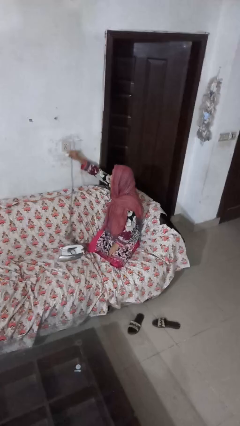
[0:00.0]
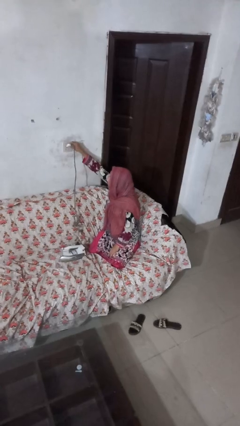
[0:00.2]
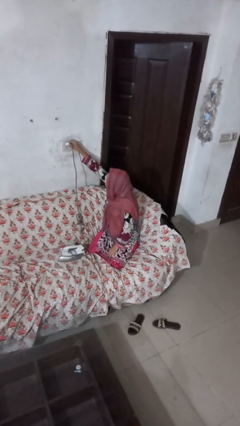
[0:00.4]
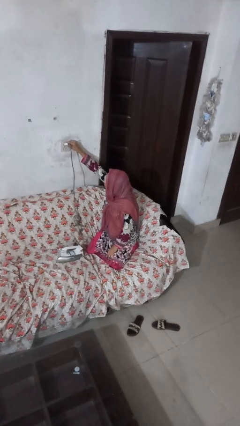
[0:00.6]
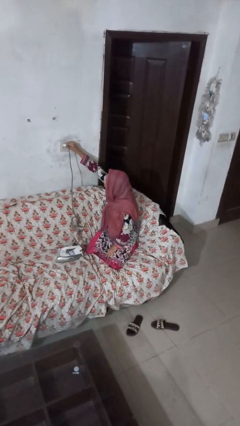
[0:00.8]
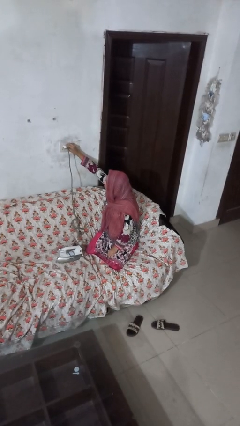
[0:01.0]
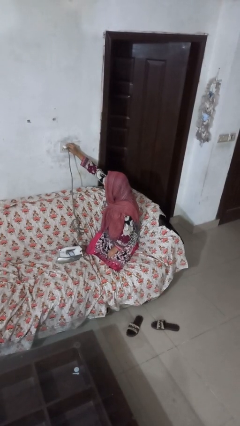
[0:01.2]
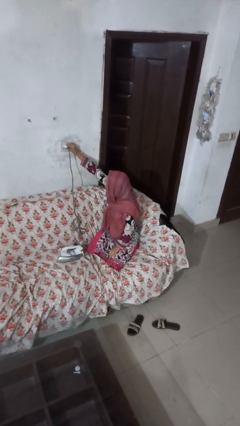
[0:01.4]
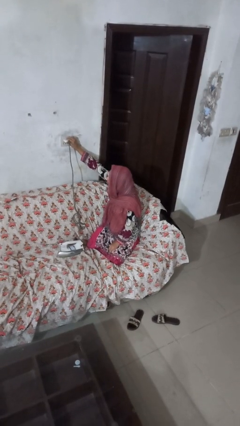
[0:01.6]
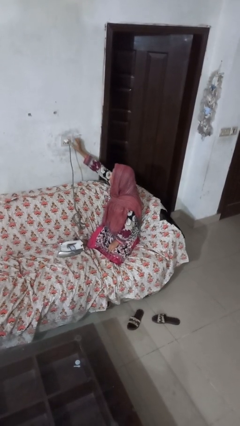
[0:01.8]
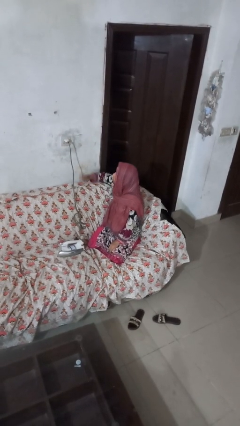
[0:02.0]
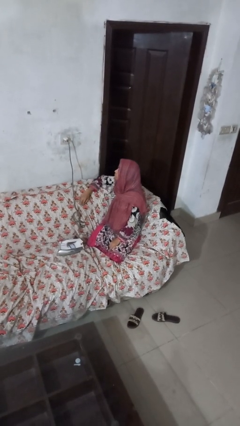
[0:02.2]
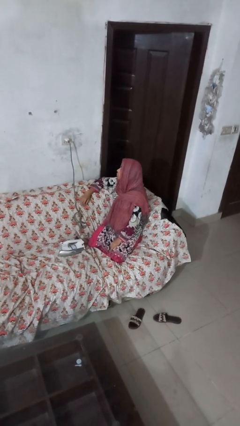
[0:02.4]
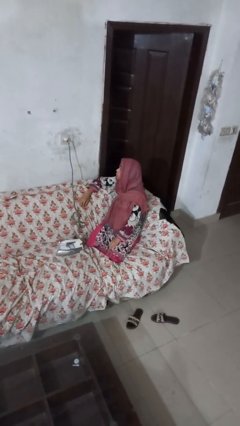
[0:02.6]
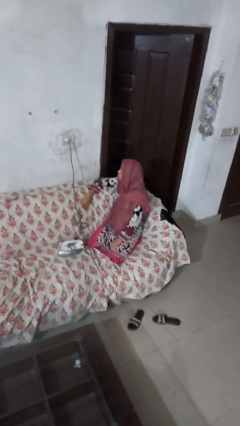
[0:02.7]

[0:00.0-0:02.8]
person plugs into electrical socket

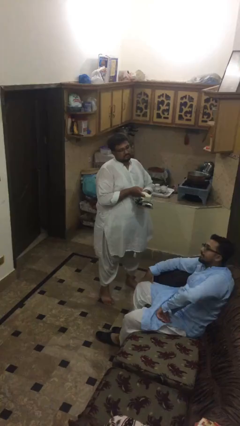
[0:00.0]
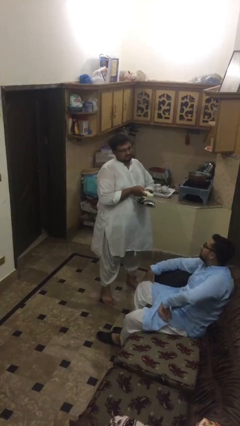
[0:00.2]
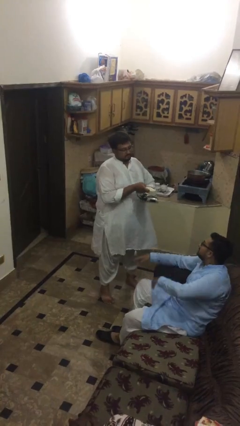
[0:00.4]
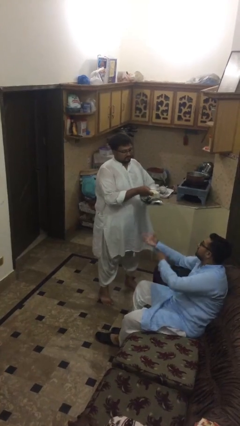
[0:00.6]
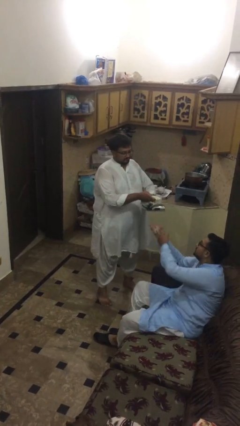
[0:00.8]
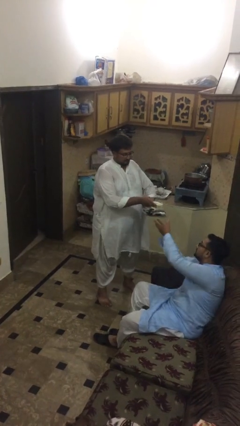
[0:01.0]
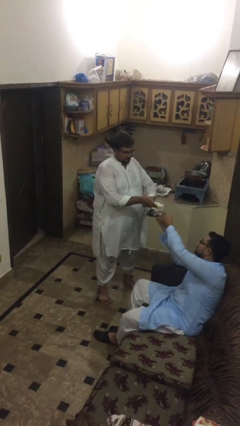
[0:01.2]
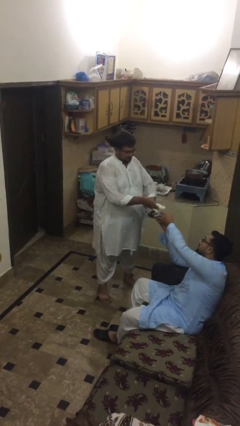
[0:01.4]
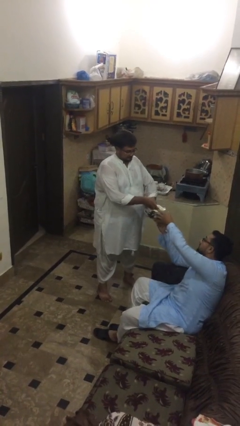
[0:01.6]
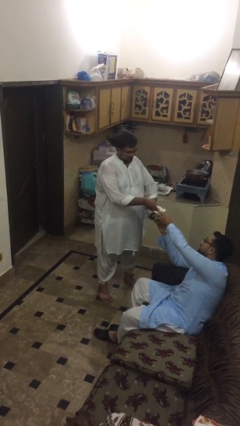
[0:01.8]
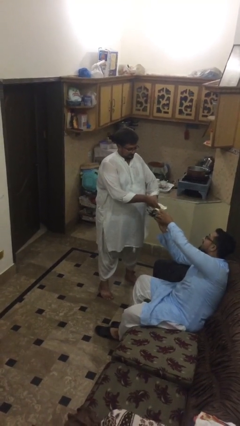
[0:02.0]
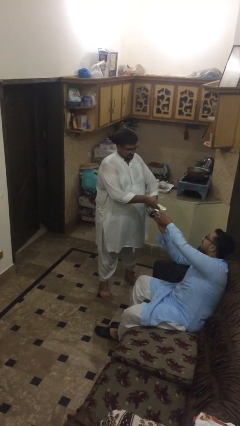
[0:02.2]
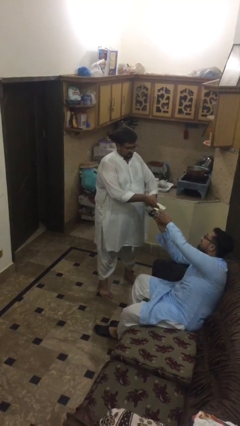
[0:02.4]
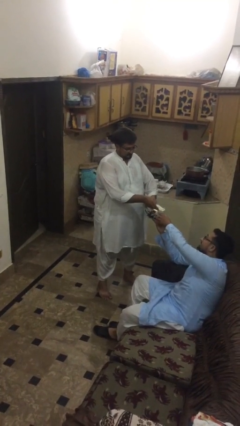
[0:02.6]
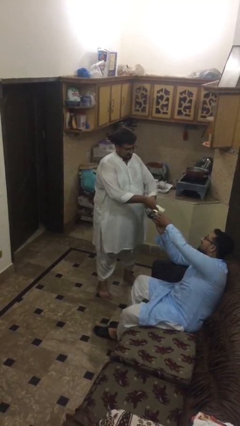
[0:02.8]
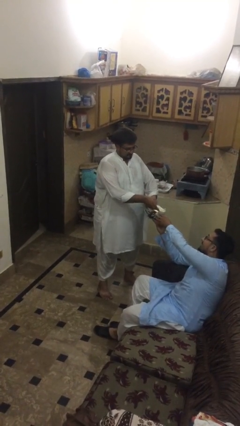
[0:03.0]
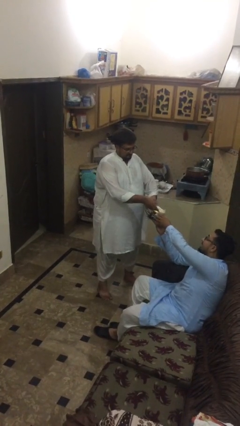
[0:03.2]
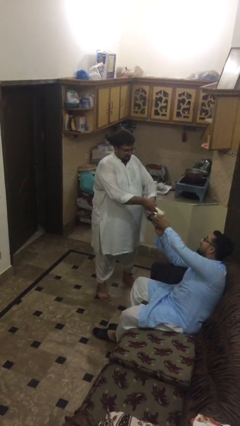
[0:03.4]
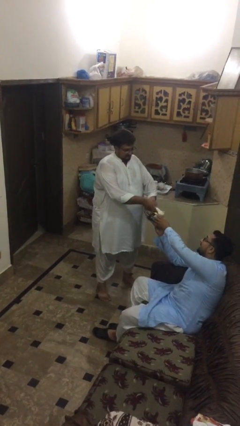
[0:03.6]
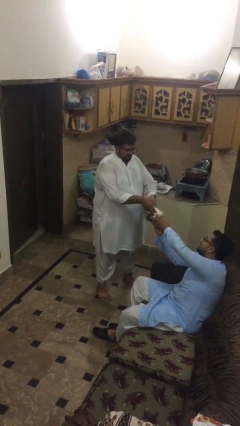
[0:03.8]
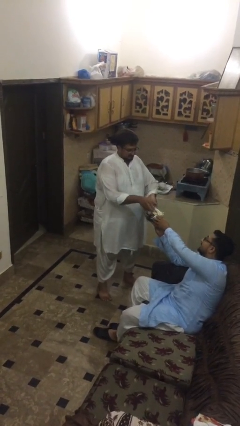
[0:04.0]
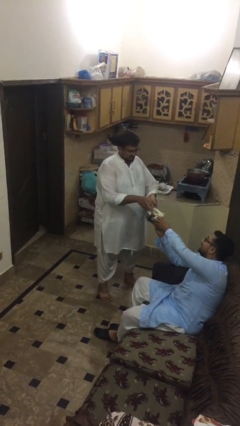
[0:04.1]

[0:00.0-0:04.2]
person transfers object to person

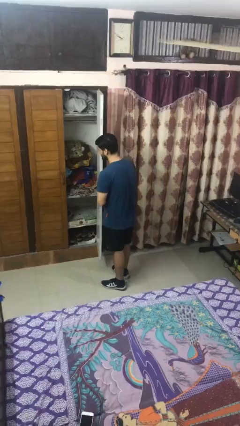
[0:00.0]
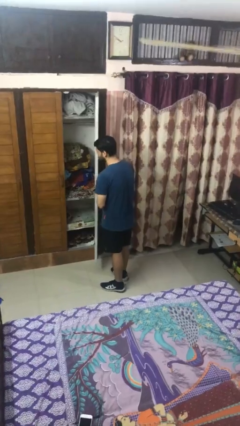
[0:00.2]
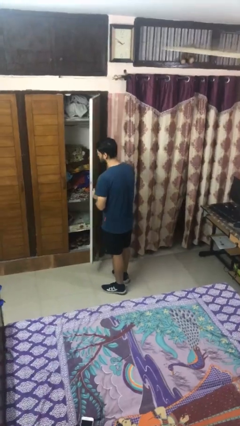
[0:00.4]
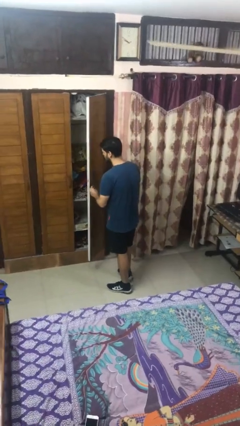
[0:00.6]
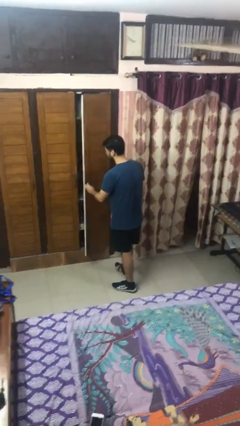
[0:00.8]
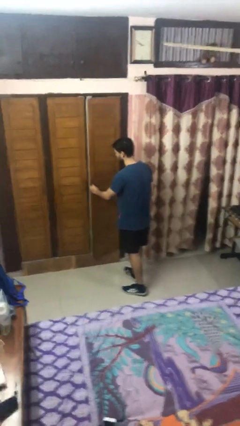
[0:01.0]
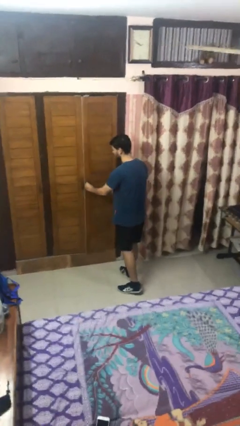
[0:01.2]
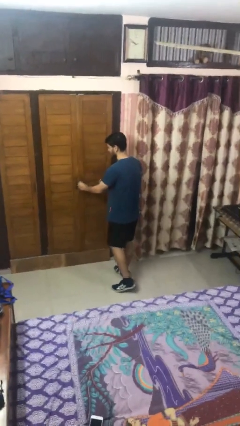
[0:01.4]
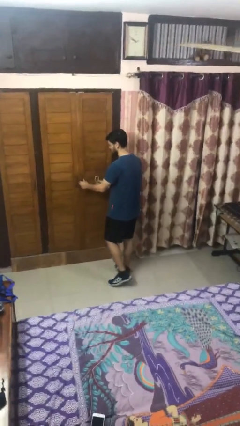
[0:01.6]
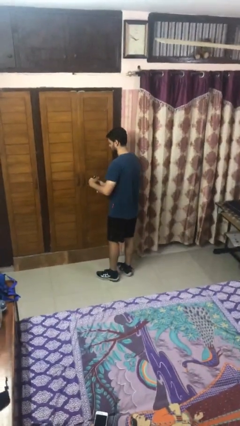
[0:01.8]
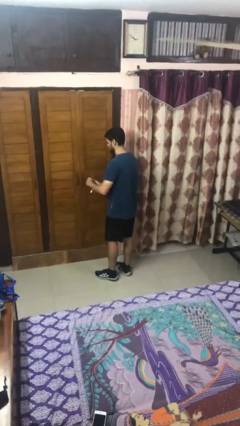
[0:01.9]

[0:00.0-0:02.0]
person closes facility door

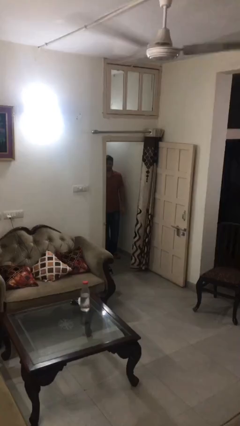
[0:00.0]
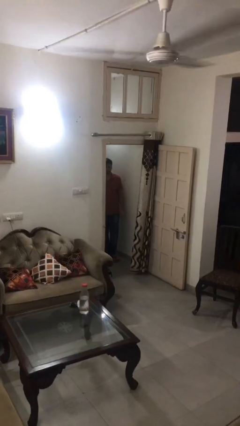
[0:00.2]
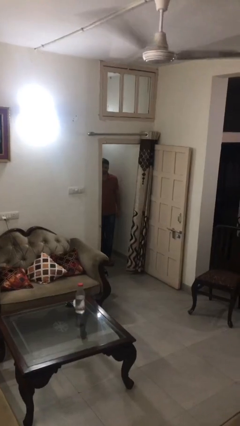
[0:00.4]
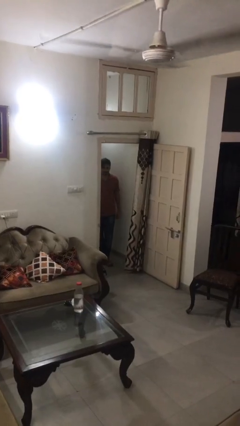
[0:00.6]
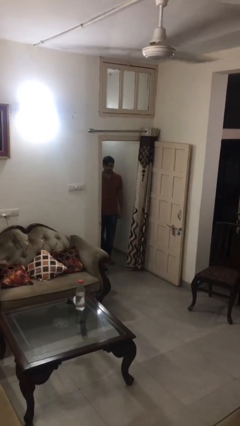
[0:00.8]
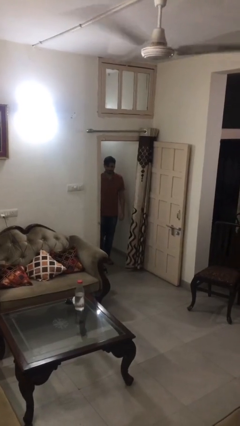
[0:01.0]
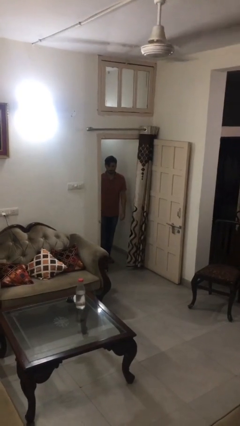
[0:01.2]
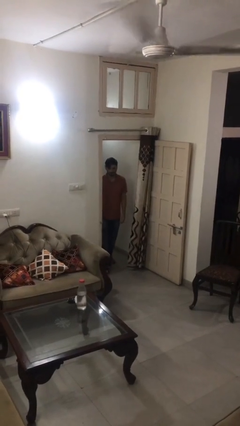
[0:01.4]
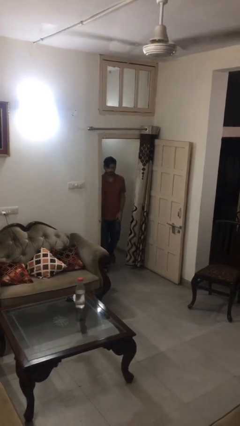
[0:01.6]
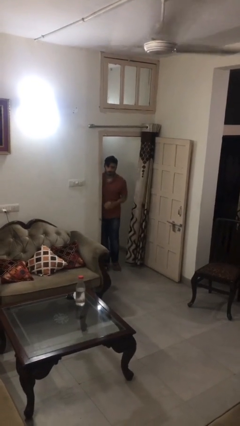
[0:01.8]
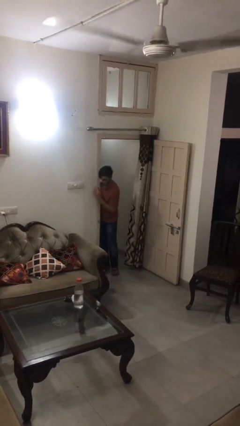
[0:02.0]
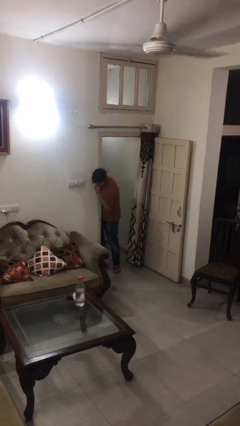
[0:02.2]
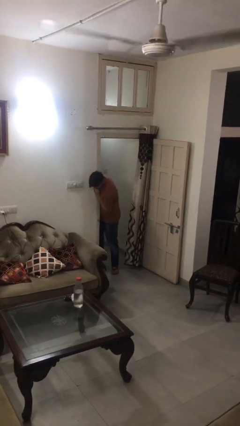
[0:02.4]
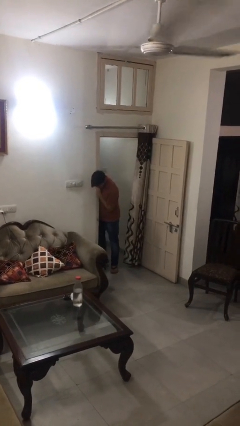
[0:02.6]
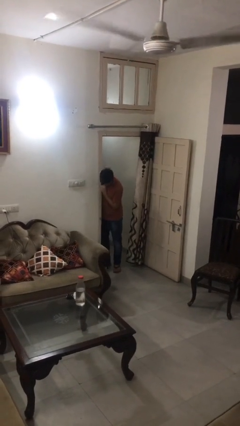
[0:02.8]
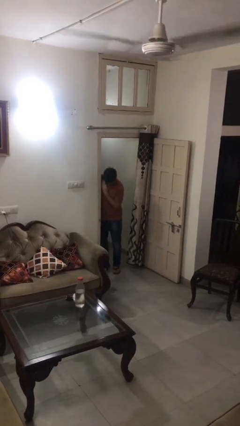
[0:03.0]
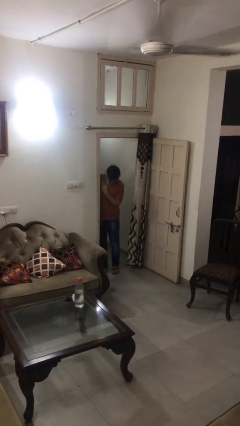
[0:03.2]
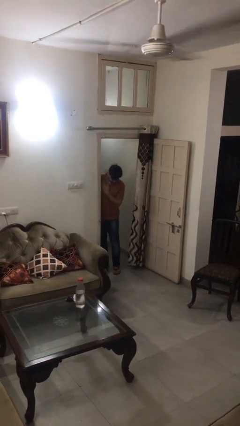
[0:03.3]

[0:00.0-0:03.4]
person bumps into wall

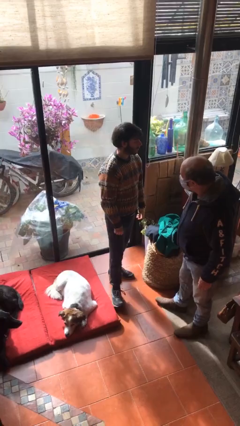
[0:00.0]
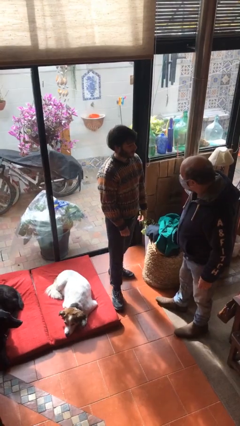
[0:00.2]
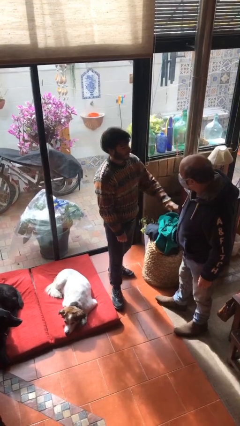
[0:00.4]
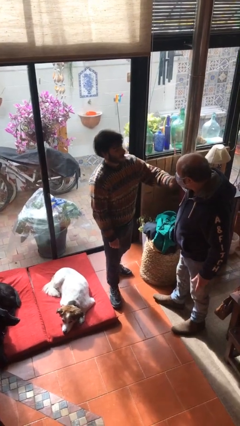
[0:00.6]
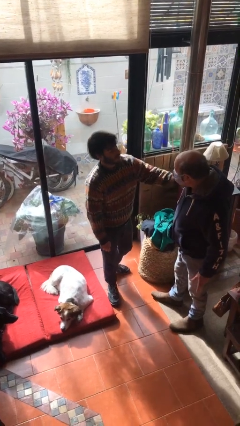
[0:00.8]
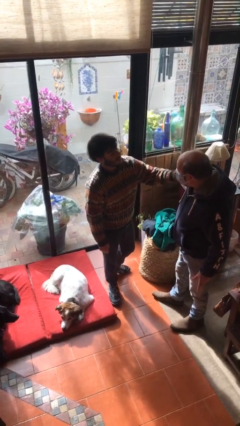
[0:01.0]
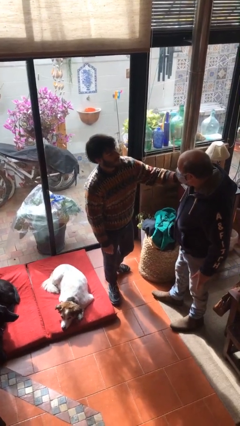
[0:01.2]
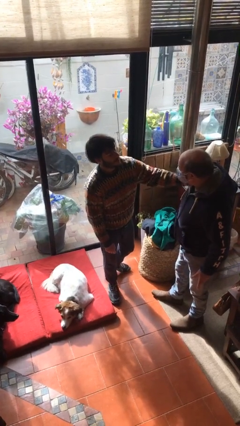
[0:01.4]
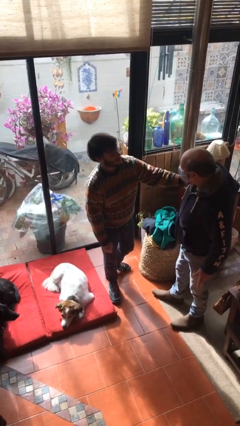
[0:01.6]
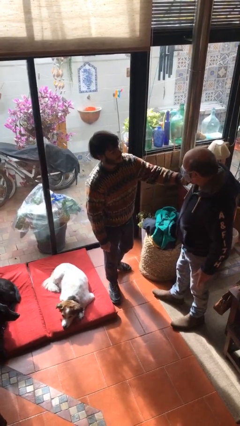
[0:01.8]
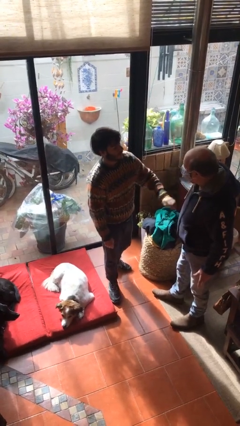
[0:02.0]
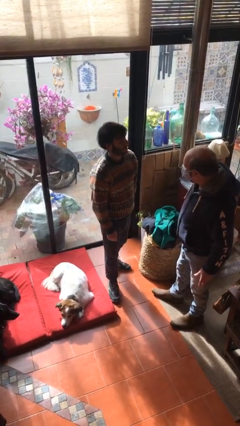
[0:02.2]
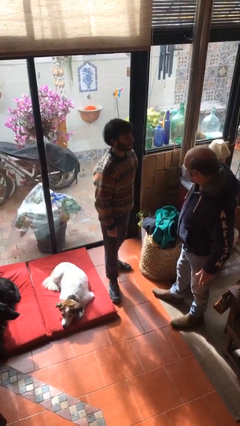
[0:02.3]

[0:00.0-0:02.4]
person pounds shoulders of person

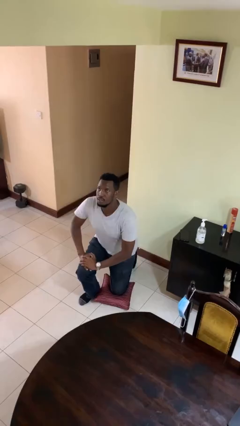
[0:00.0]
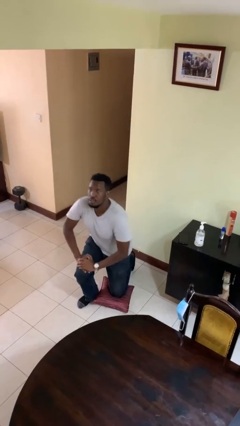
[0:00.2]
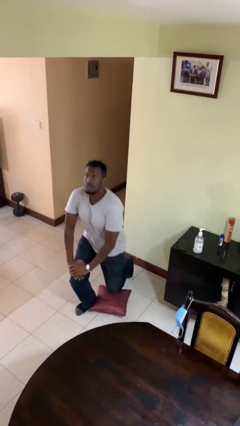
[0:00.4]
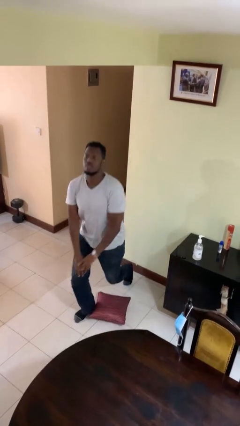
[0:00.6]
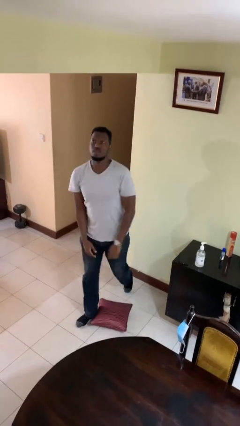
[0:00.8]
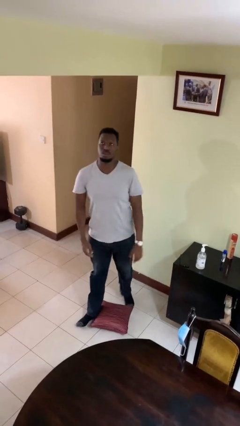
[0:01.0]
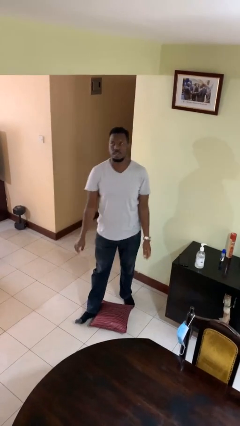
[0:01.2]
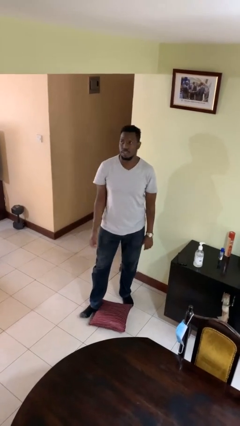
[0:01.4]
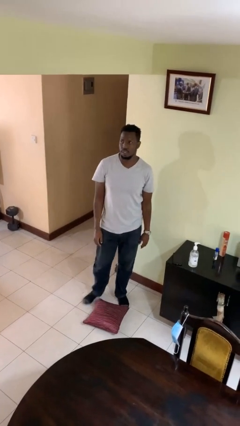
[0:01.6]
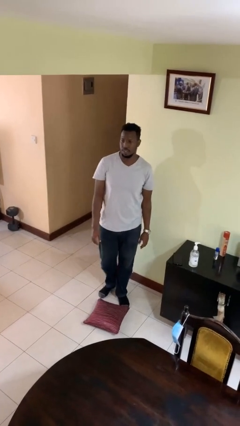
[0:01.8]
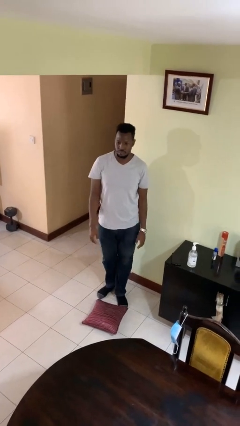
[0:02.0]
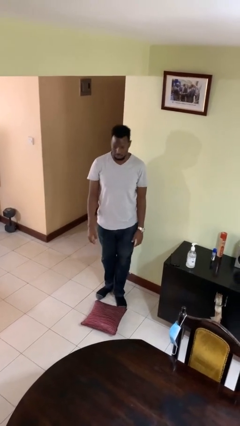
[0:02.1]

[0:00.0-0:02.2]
person stands up from floor

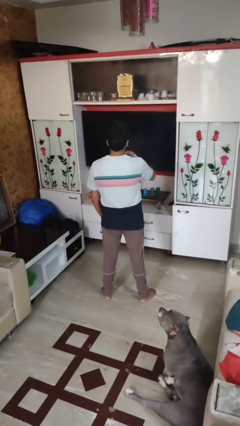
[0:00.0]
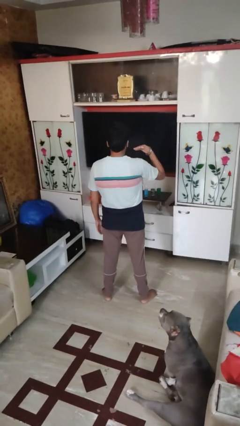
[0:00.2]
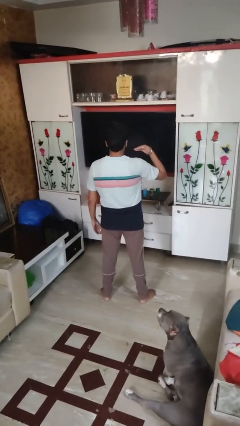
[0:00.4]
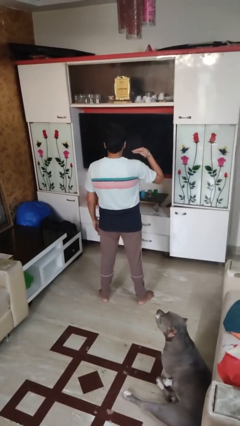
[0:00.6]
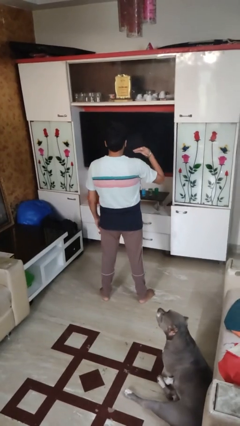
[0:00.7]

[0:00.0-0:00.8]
person gestures cut
